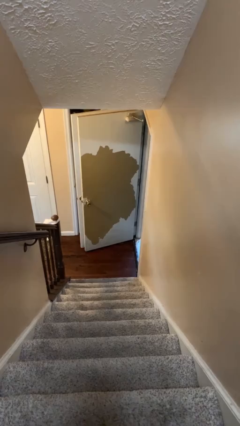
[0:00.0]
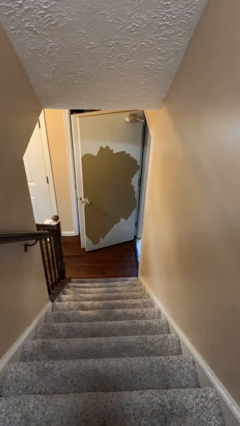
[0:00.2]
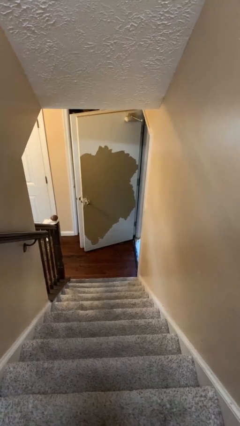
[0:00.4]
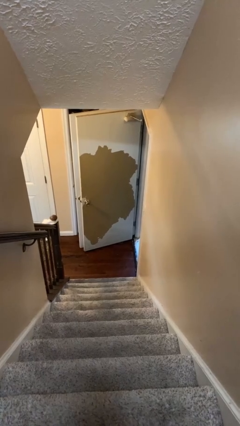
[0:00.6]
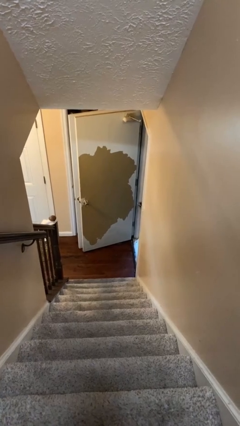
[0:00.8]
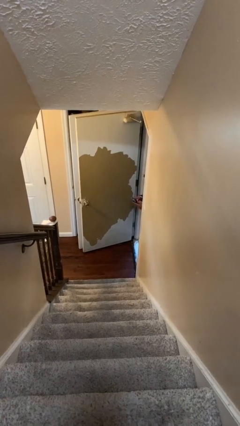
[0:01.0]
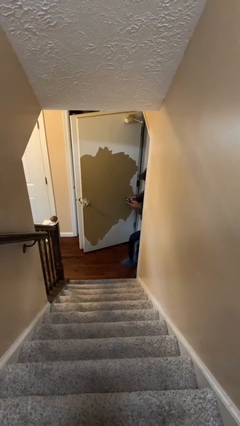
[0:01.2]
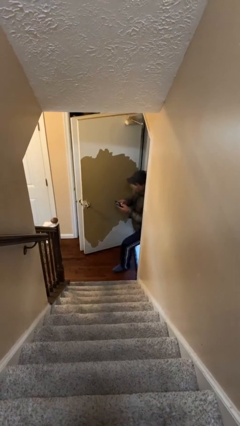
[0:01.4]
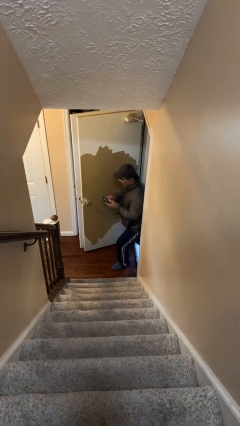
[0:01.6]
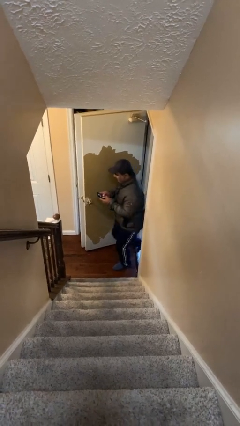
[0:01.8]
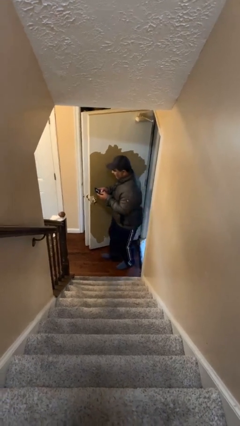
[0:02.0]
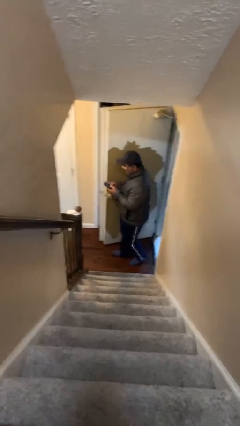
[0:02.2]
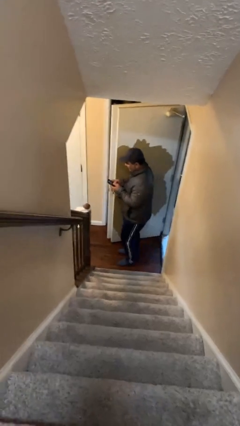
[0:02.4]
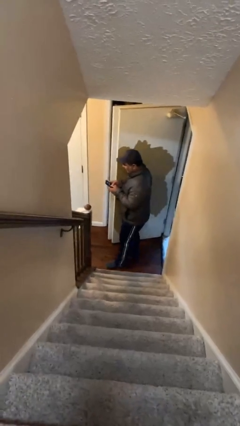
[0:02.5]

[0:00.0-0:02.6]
person enters scene through structure

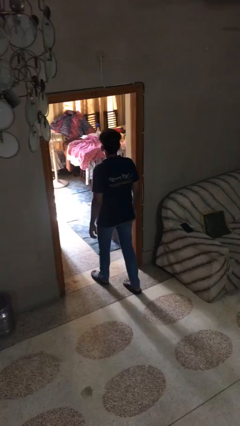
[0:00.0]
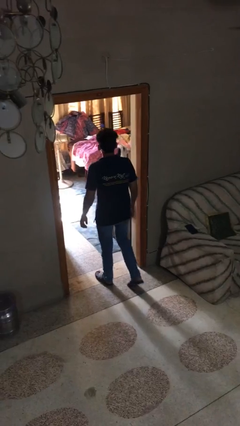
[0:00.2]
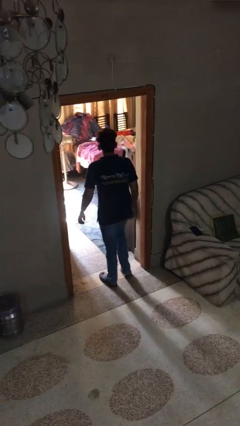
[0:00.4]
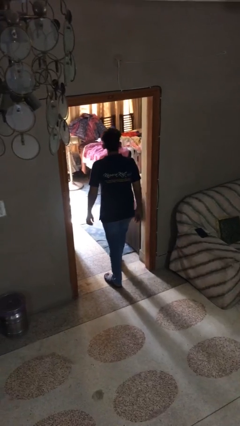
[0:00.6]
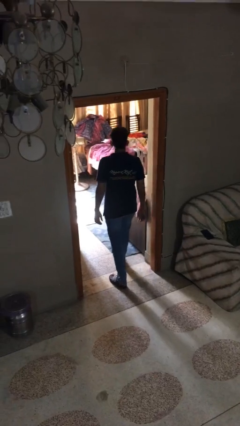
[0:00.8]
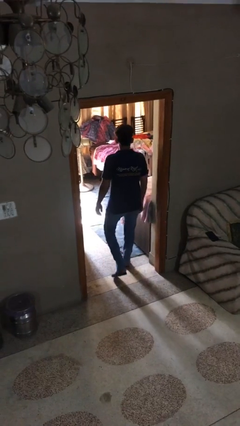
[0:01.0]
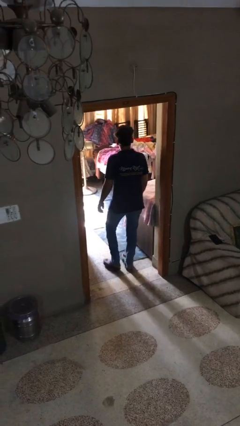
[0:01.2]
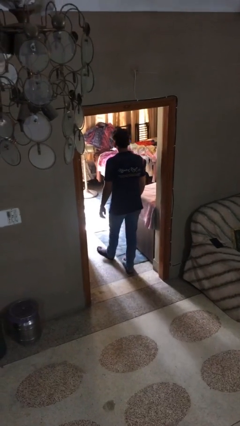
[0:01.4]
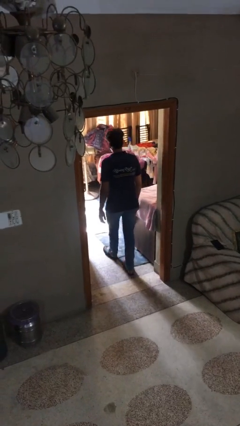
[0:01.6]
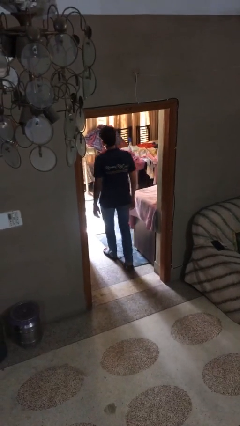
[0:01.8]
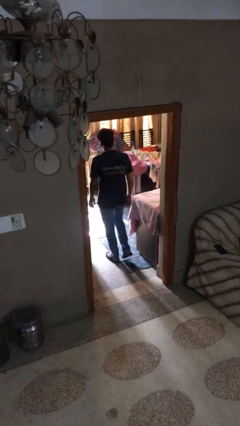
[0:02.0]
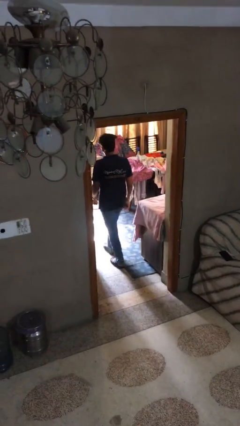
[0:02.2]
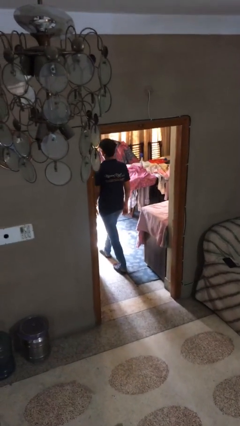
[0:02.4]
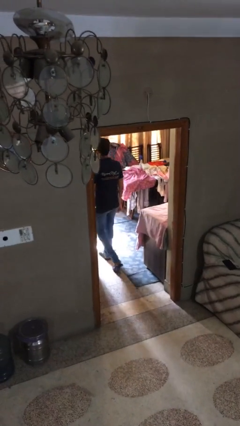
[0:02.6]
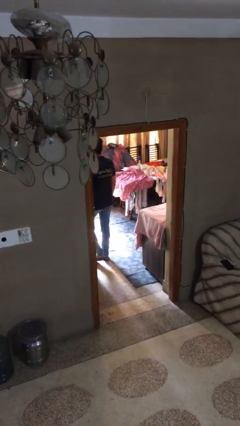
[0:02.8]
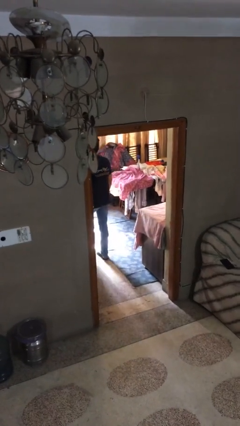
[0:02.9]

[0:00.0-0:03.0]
person exits scene through structure

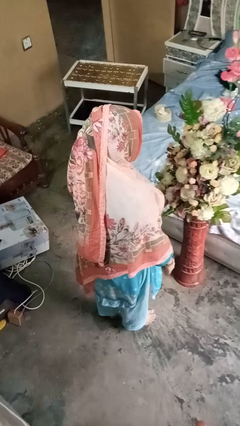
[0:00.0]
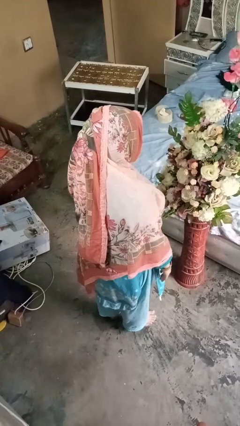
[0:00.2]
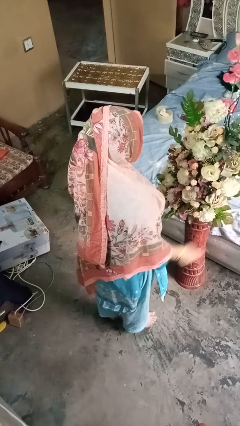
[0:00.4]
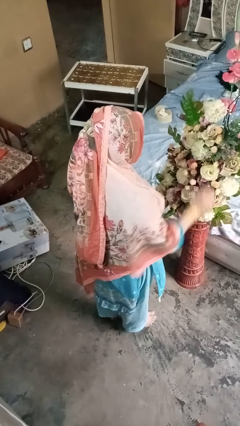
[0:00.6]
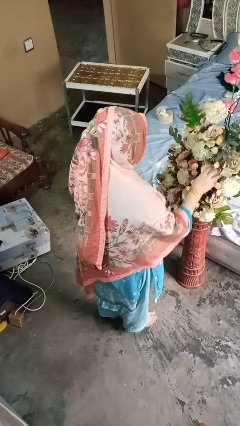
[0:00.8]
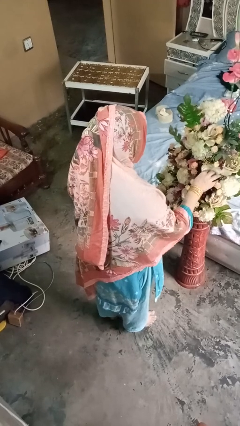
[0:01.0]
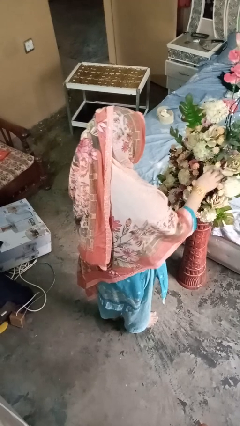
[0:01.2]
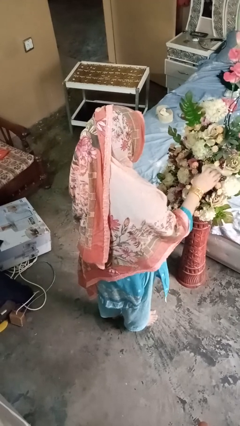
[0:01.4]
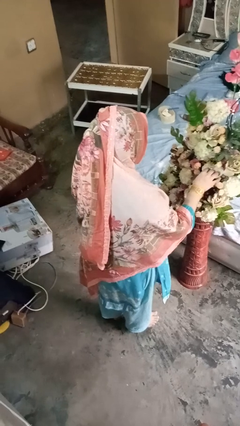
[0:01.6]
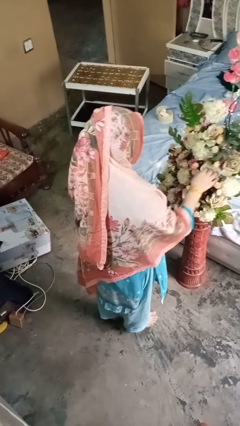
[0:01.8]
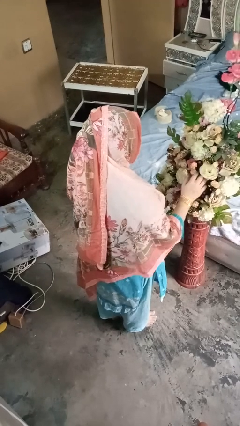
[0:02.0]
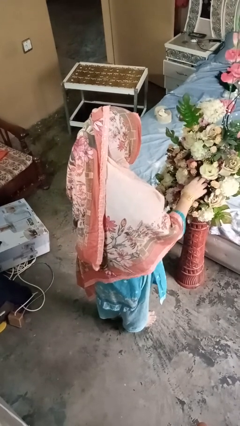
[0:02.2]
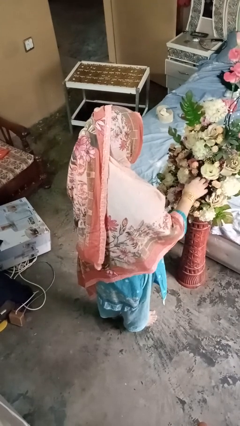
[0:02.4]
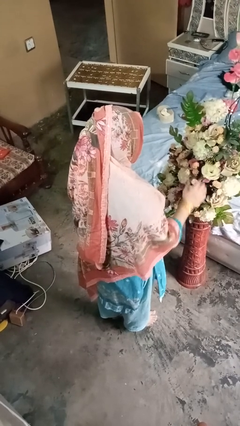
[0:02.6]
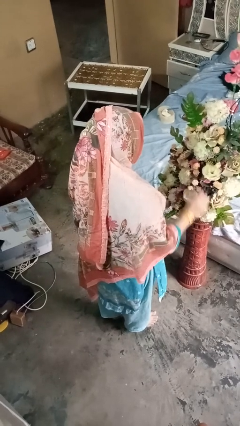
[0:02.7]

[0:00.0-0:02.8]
person arranges flowers in vase

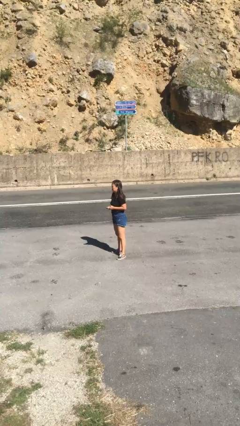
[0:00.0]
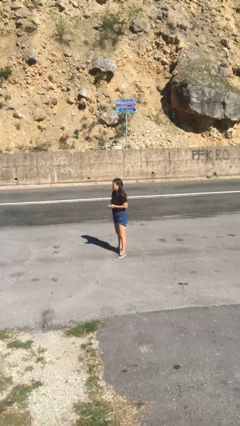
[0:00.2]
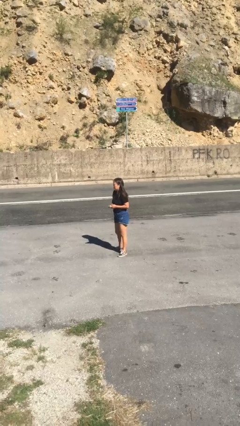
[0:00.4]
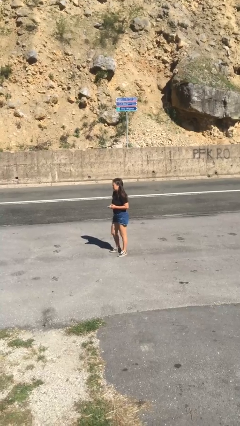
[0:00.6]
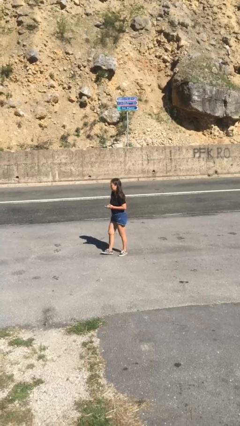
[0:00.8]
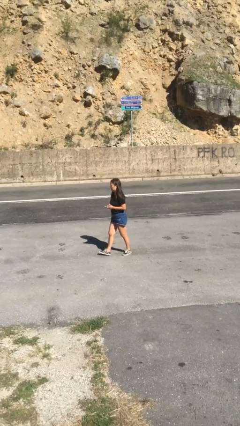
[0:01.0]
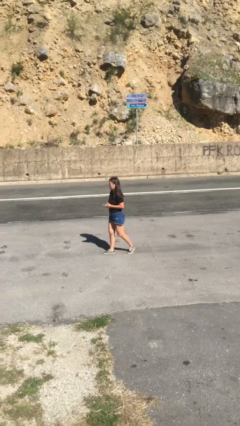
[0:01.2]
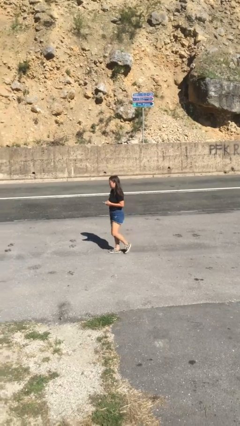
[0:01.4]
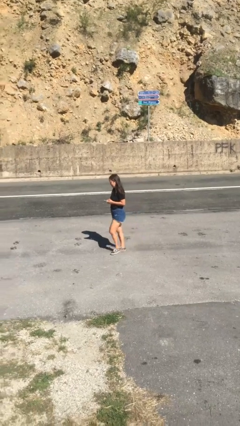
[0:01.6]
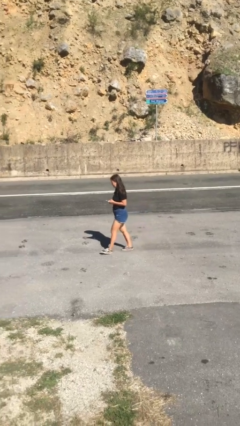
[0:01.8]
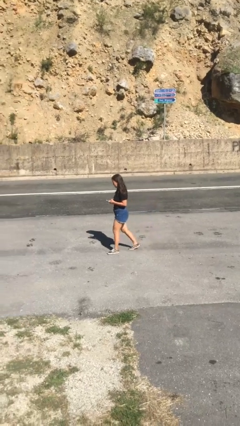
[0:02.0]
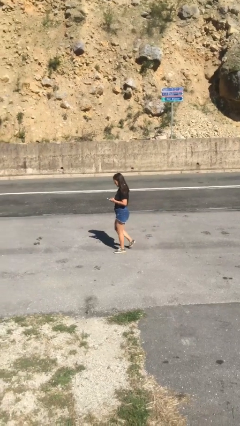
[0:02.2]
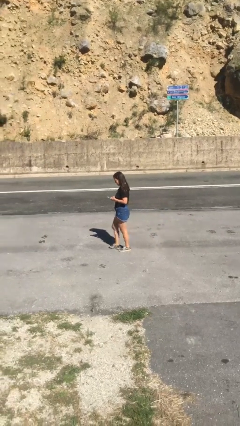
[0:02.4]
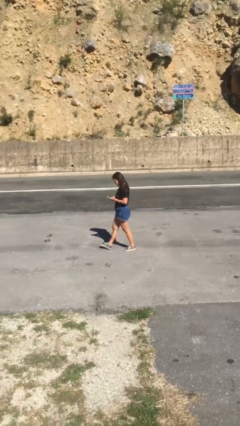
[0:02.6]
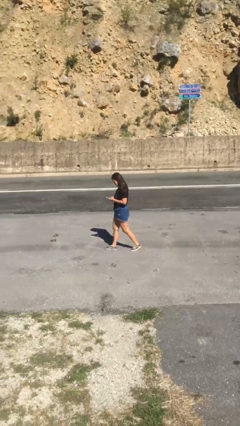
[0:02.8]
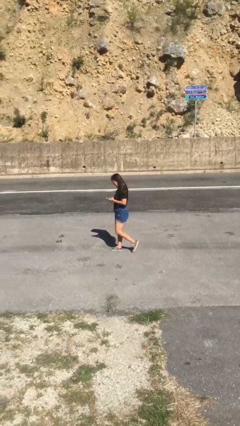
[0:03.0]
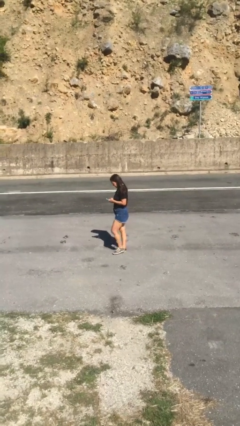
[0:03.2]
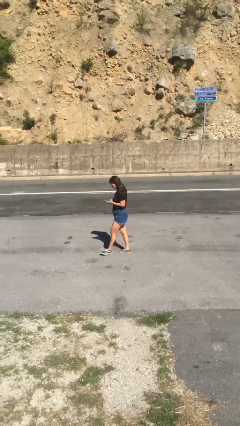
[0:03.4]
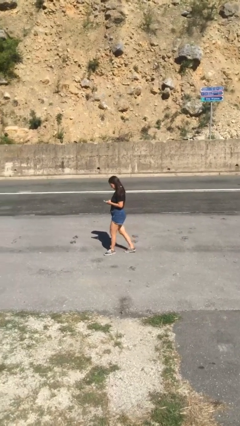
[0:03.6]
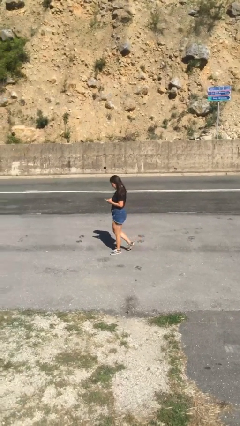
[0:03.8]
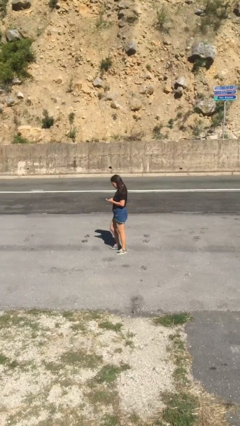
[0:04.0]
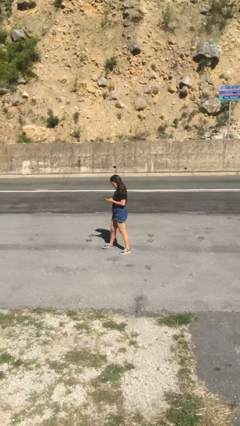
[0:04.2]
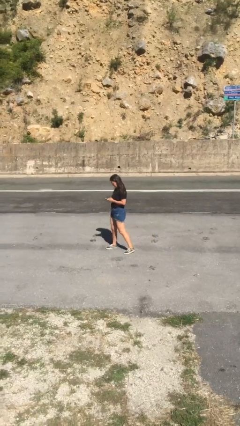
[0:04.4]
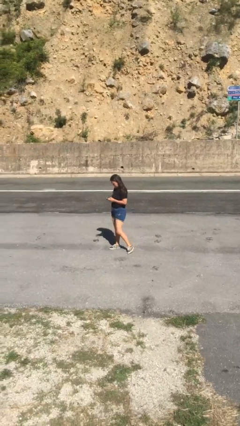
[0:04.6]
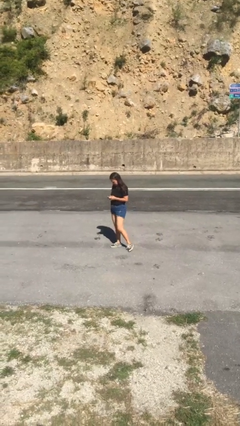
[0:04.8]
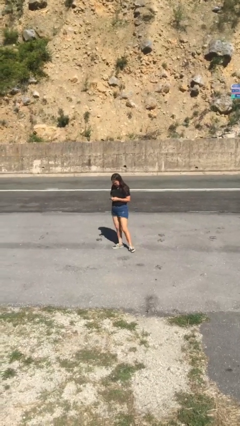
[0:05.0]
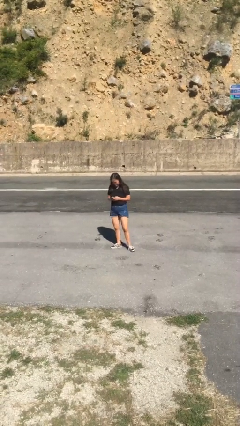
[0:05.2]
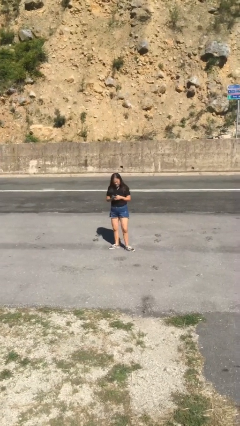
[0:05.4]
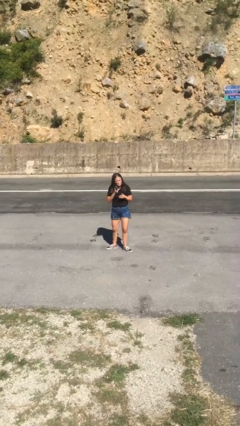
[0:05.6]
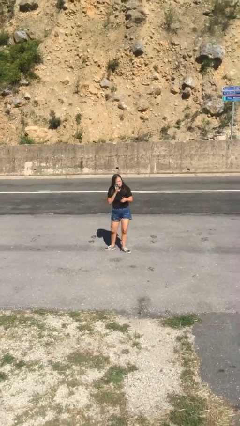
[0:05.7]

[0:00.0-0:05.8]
person texts on phone

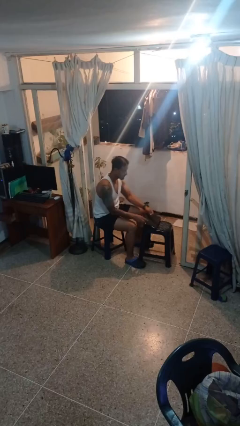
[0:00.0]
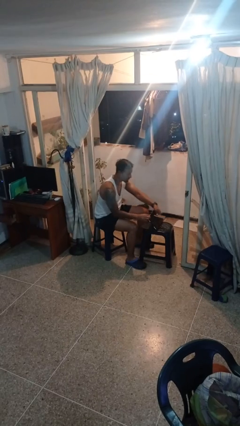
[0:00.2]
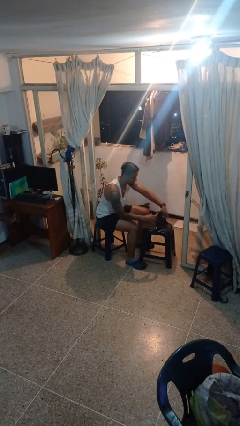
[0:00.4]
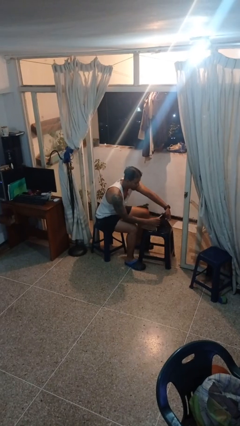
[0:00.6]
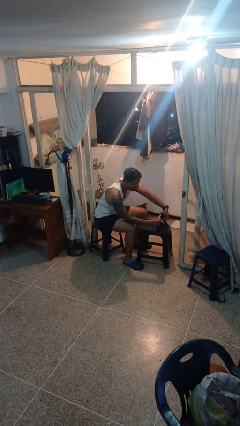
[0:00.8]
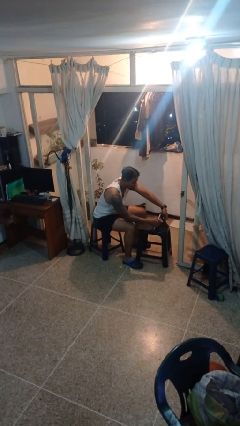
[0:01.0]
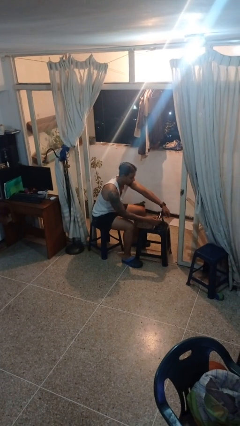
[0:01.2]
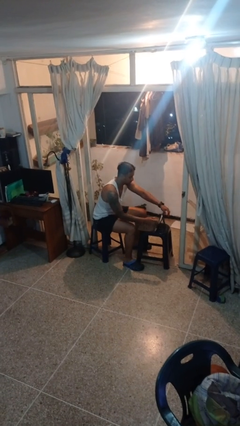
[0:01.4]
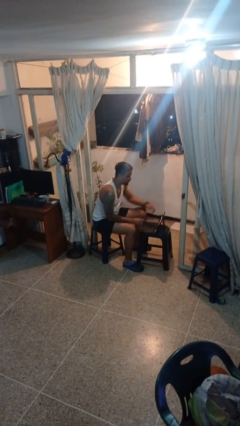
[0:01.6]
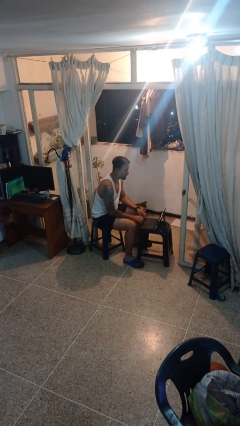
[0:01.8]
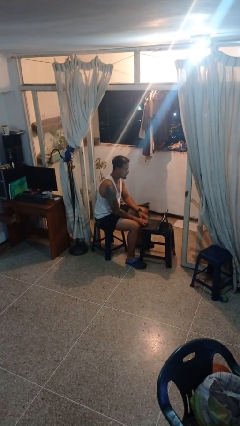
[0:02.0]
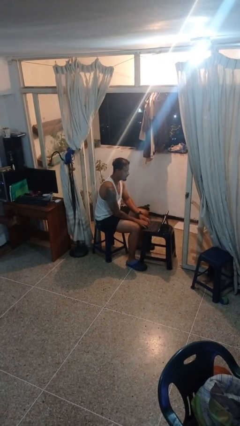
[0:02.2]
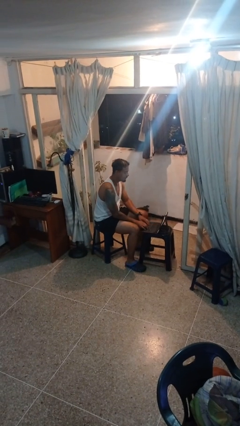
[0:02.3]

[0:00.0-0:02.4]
person opens laptop

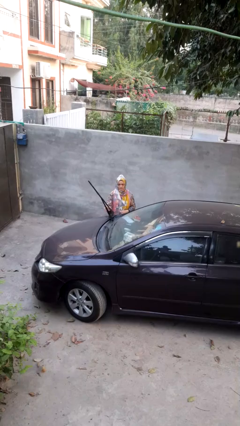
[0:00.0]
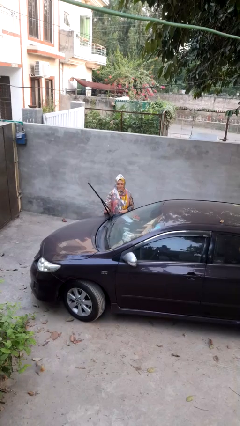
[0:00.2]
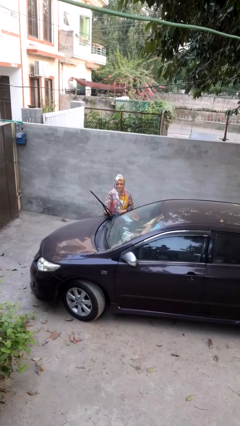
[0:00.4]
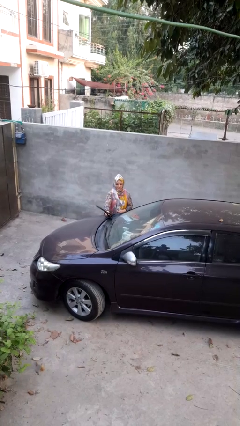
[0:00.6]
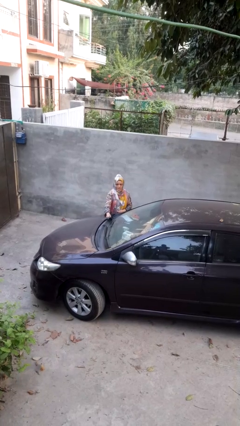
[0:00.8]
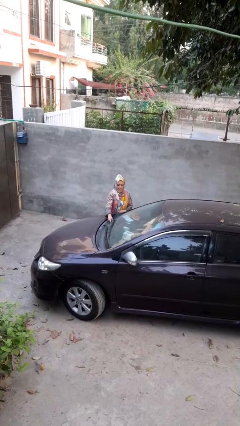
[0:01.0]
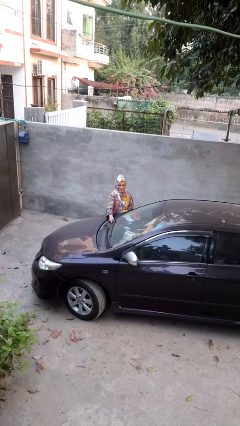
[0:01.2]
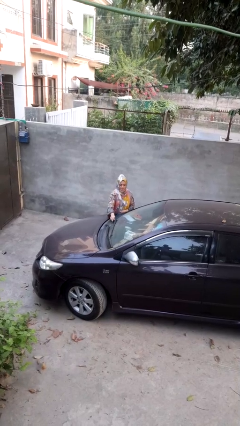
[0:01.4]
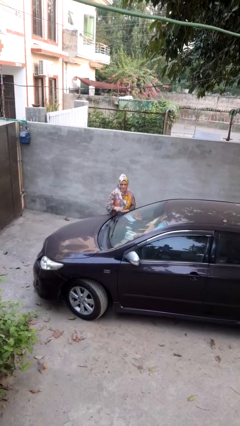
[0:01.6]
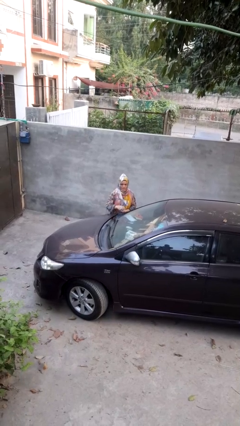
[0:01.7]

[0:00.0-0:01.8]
person flips down car wipers
